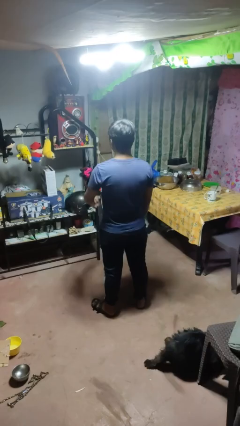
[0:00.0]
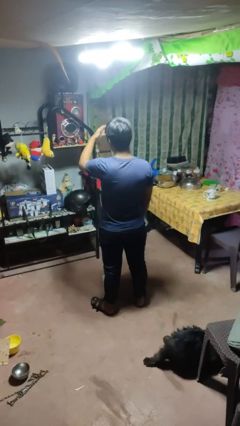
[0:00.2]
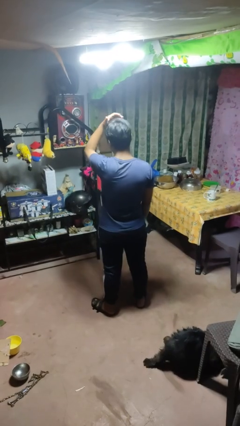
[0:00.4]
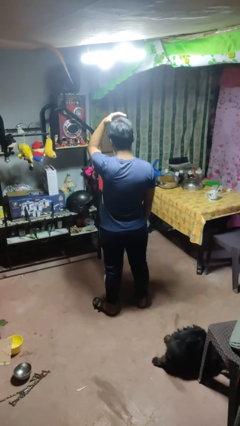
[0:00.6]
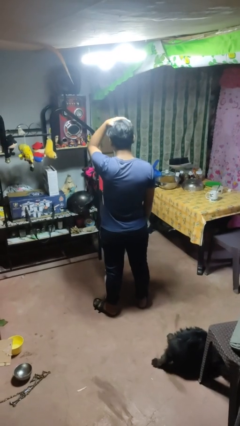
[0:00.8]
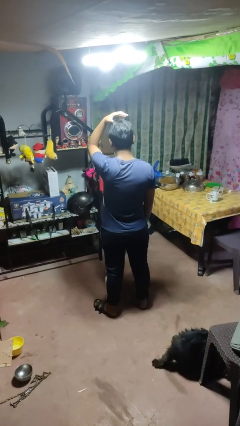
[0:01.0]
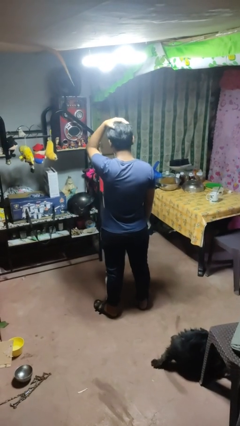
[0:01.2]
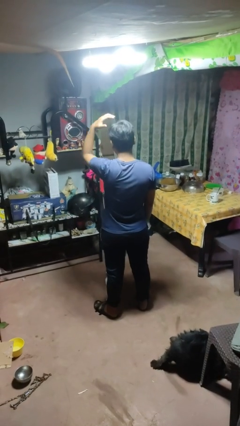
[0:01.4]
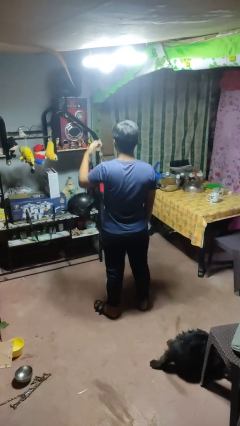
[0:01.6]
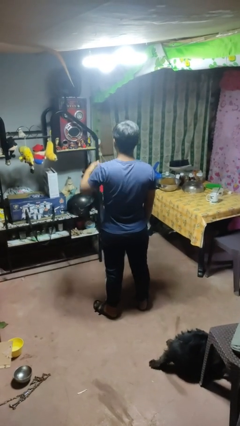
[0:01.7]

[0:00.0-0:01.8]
person pats head

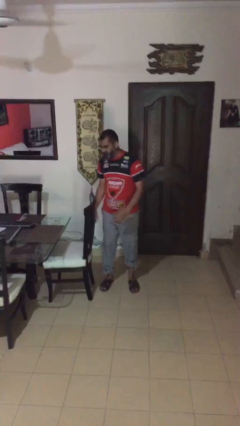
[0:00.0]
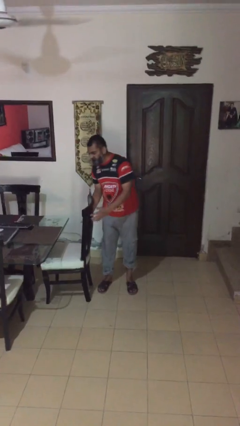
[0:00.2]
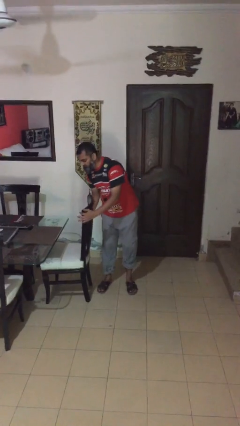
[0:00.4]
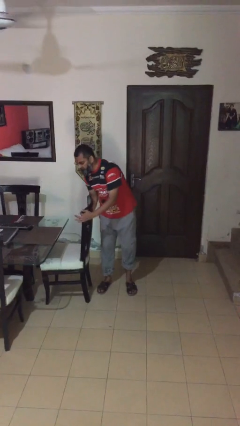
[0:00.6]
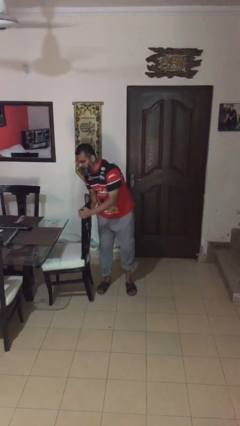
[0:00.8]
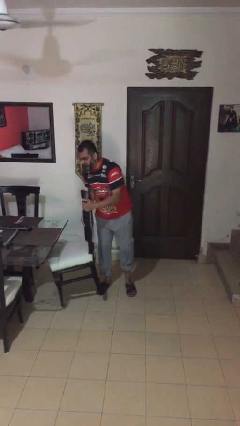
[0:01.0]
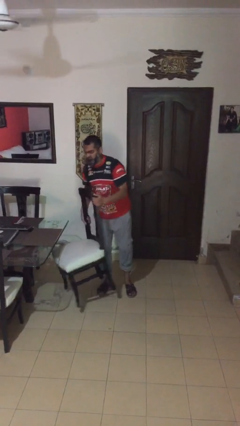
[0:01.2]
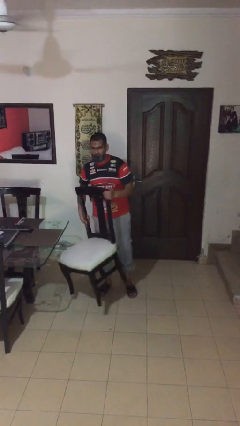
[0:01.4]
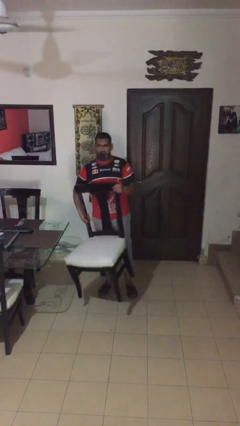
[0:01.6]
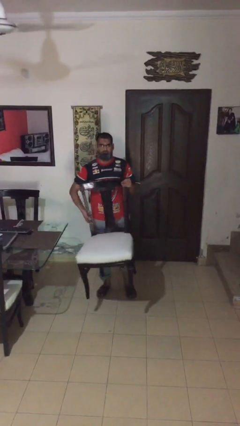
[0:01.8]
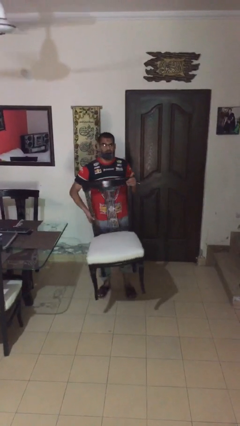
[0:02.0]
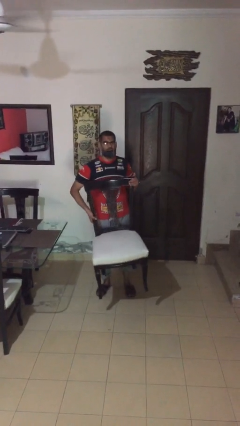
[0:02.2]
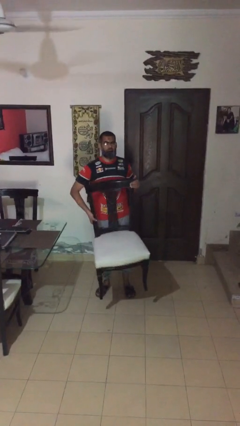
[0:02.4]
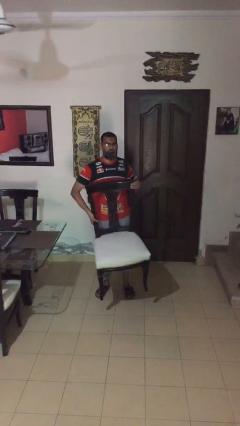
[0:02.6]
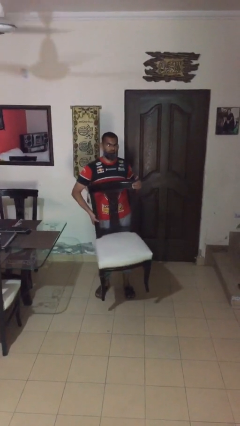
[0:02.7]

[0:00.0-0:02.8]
person picks up object from floor

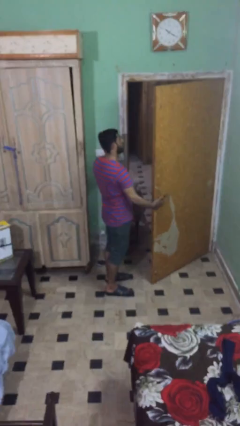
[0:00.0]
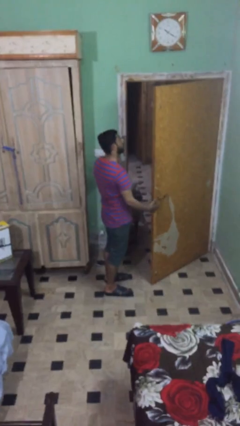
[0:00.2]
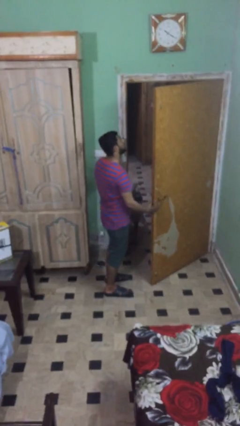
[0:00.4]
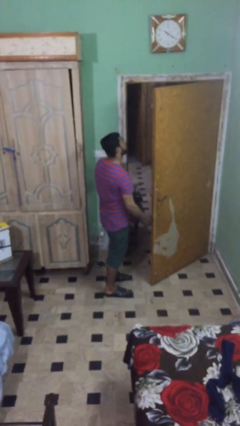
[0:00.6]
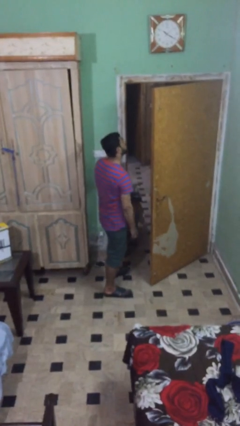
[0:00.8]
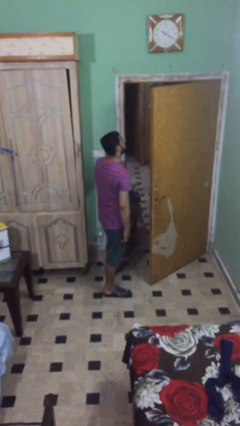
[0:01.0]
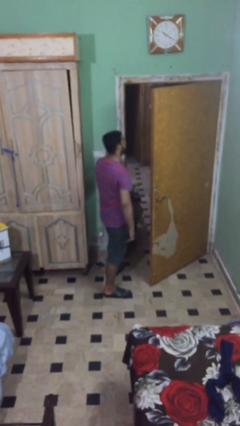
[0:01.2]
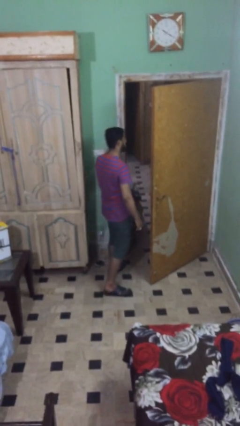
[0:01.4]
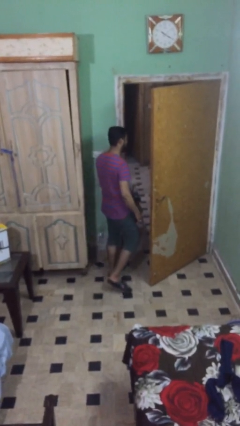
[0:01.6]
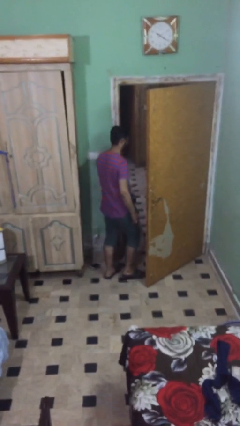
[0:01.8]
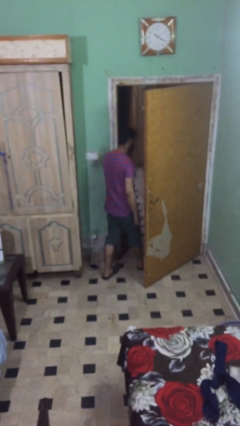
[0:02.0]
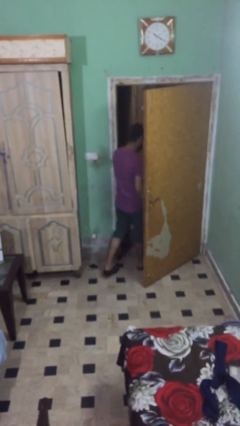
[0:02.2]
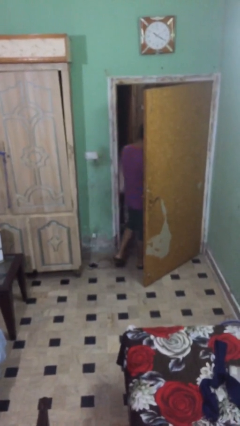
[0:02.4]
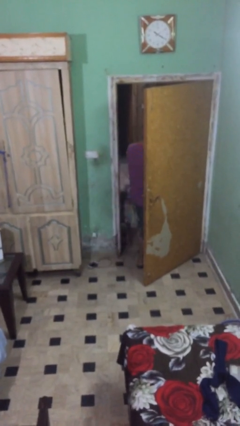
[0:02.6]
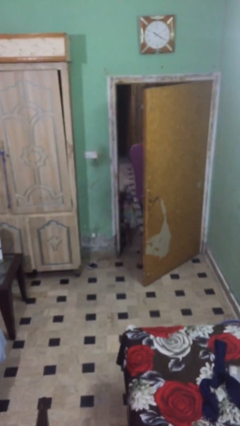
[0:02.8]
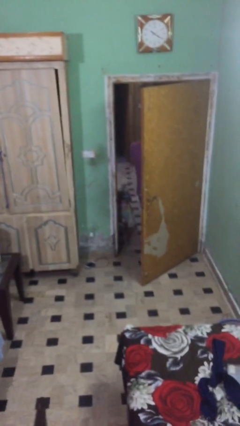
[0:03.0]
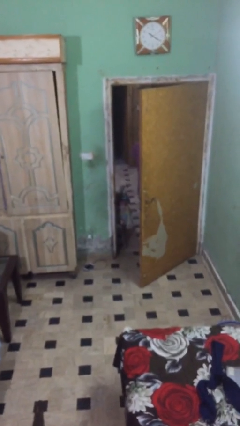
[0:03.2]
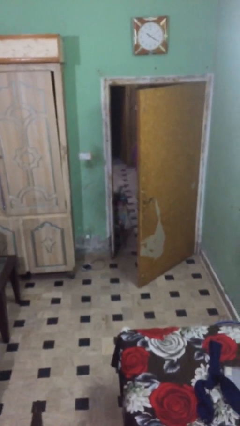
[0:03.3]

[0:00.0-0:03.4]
person exits scene through structure

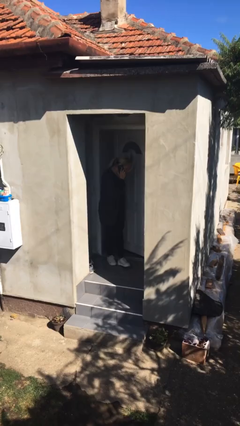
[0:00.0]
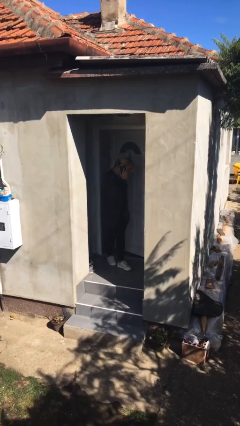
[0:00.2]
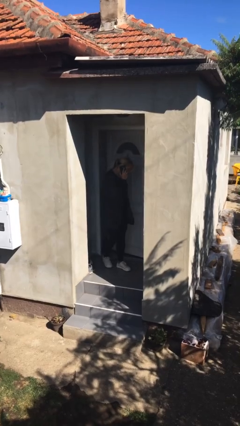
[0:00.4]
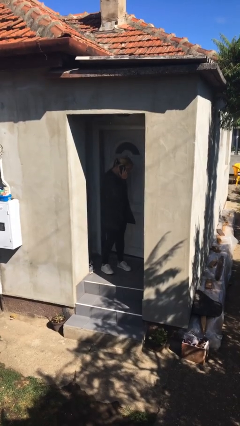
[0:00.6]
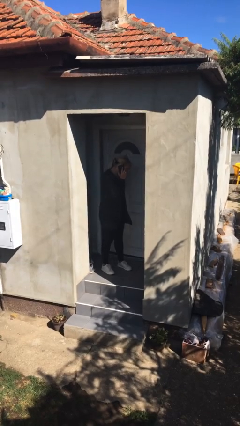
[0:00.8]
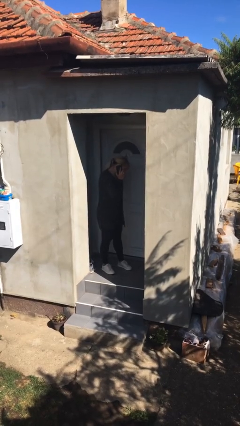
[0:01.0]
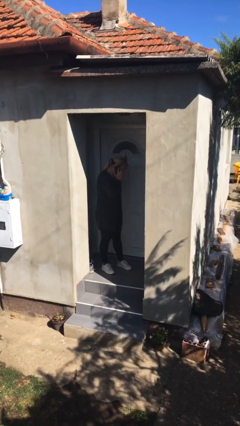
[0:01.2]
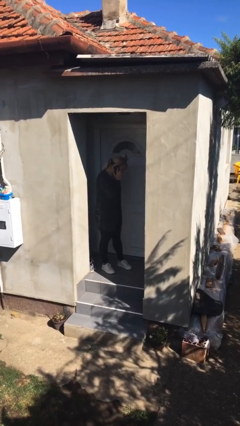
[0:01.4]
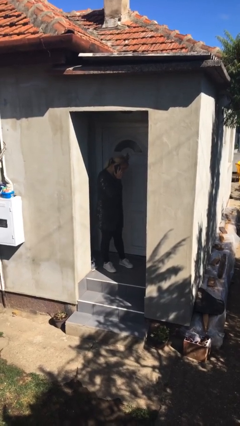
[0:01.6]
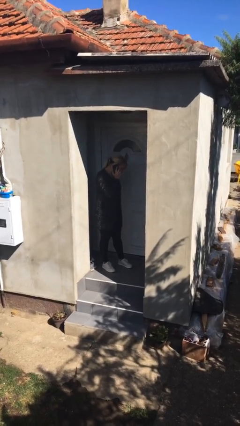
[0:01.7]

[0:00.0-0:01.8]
person enters scene through structure

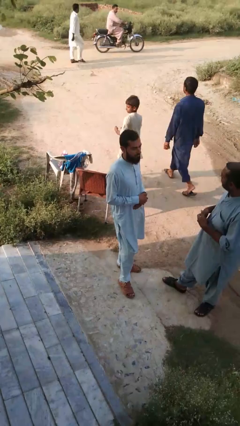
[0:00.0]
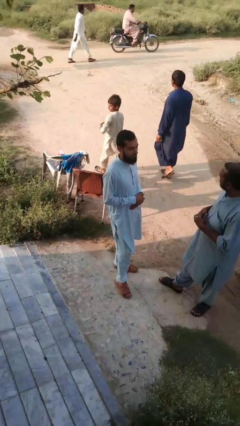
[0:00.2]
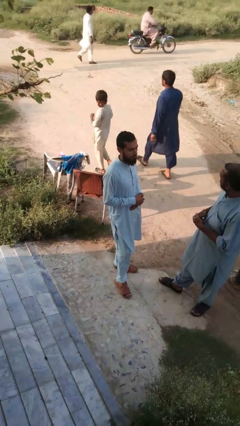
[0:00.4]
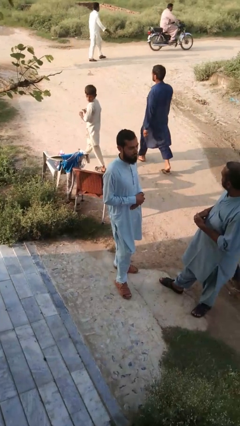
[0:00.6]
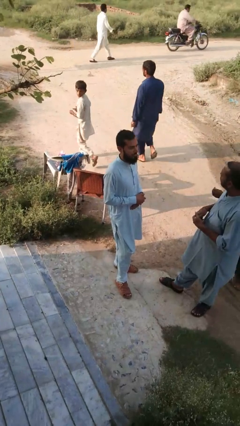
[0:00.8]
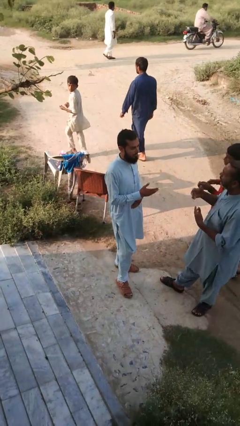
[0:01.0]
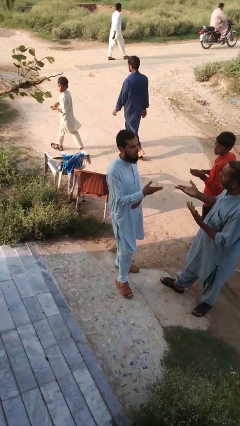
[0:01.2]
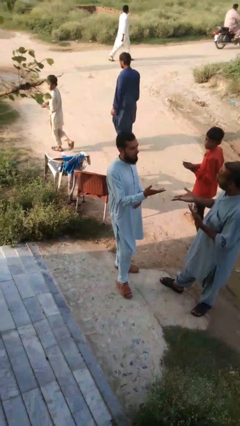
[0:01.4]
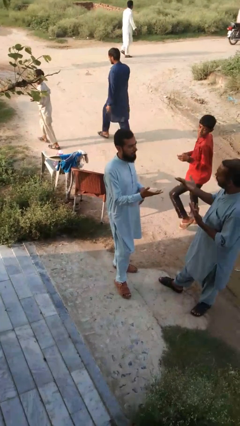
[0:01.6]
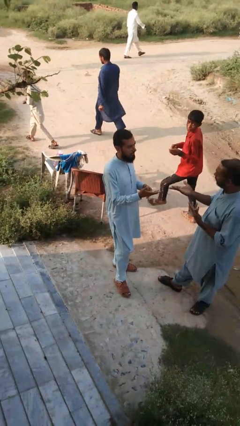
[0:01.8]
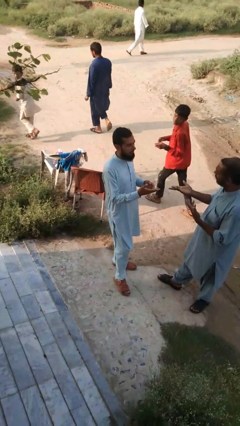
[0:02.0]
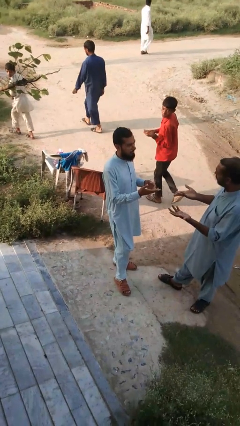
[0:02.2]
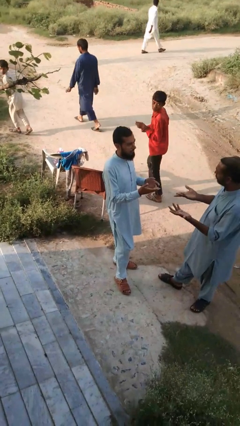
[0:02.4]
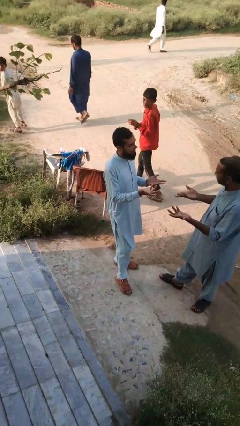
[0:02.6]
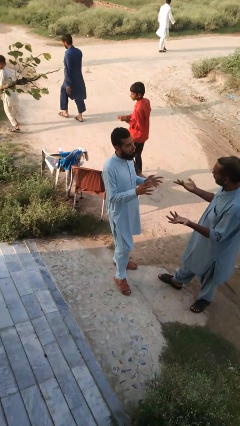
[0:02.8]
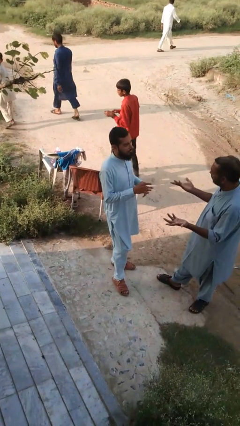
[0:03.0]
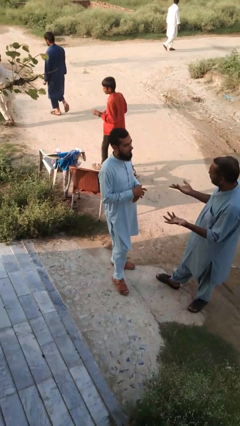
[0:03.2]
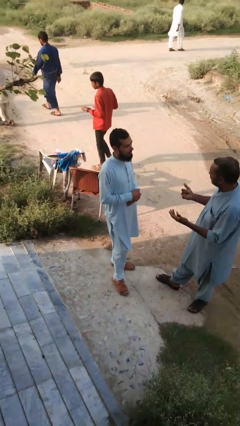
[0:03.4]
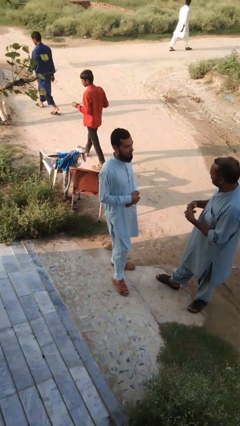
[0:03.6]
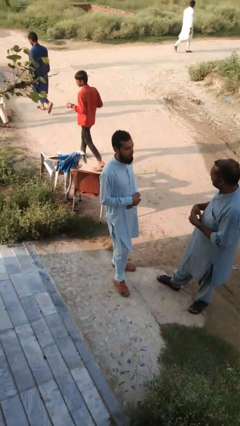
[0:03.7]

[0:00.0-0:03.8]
person talks to person

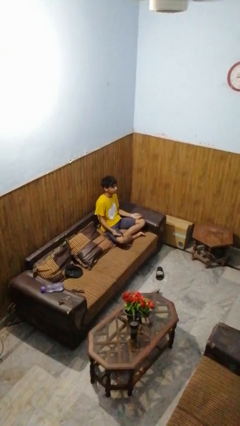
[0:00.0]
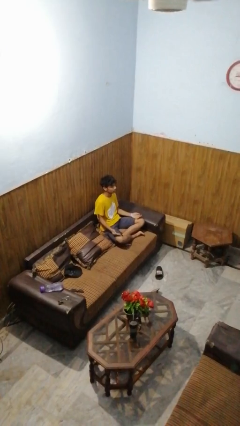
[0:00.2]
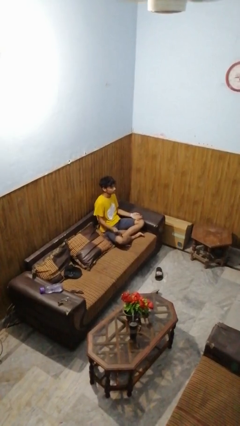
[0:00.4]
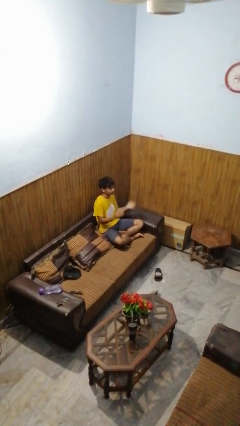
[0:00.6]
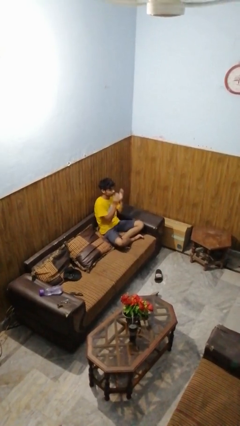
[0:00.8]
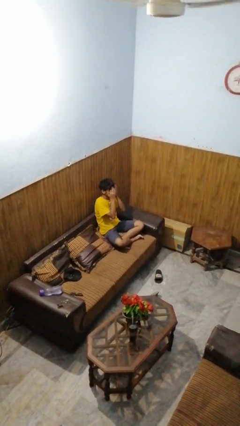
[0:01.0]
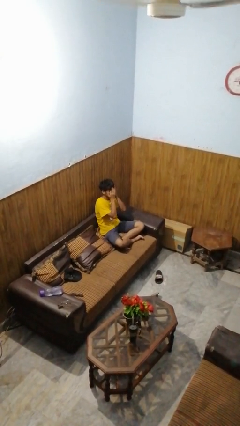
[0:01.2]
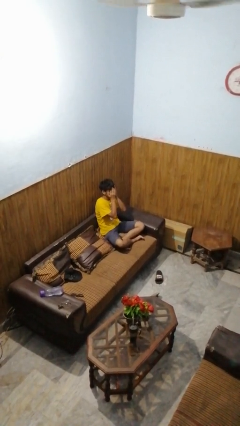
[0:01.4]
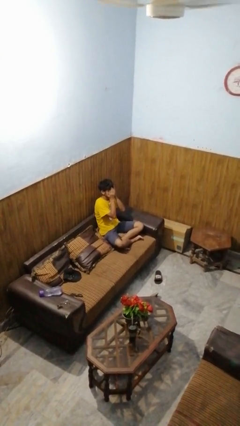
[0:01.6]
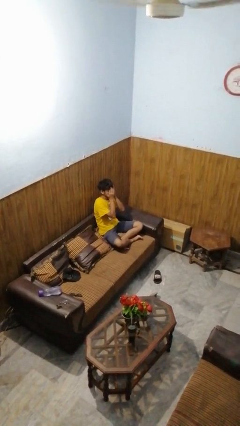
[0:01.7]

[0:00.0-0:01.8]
person covers face with hands

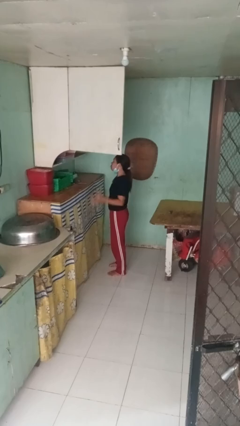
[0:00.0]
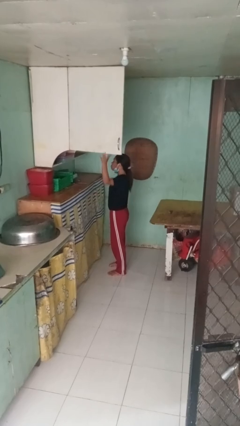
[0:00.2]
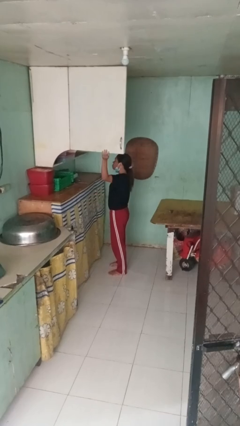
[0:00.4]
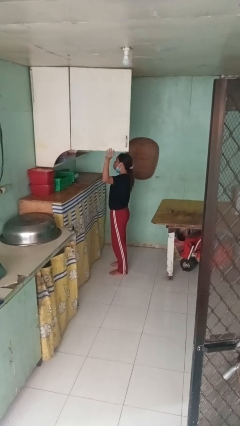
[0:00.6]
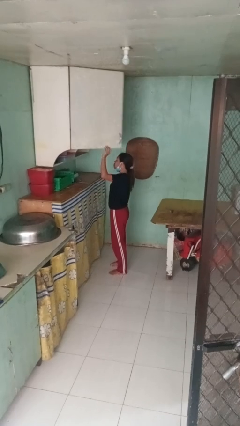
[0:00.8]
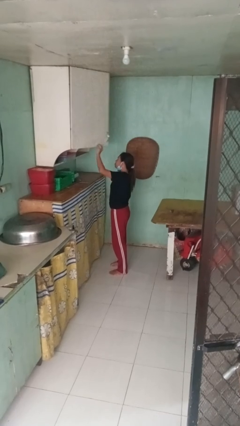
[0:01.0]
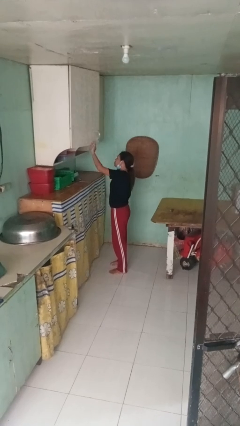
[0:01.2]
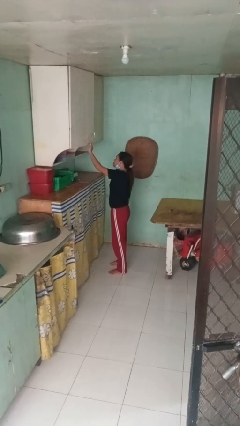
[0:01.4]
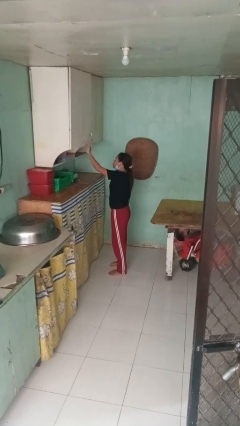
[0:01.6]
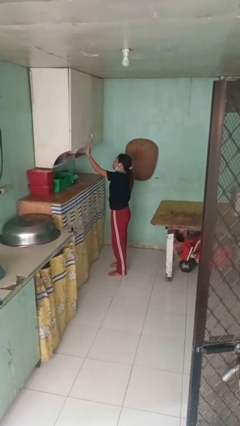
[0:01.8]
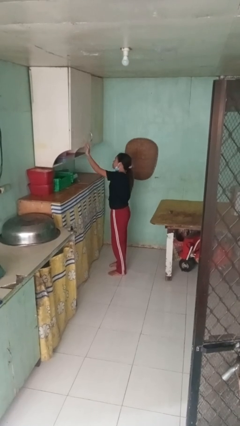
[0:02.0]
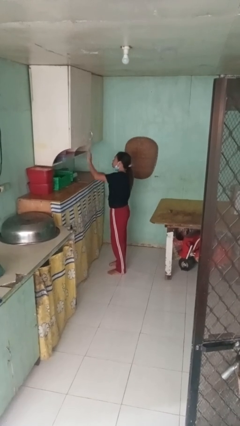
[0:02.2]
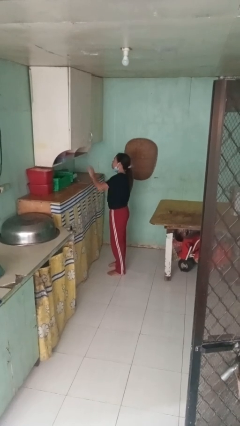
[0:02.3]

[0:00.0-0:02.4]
person closes cabinet
